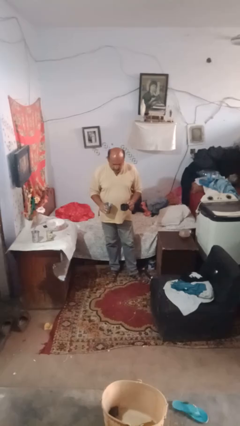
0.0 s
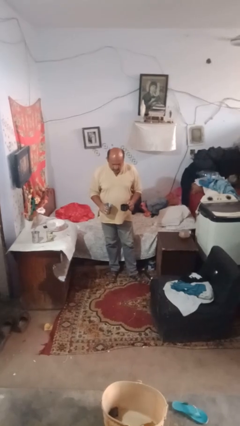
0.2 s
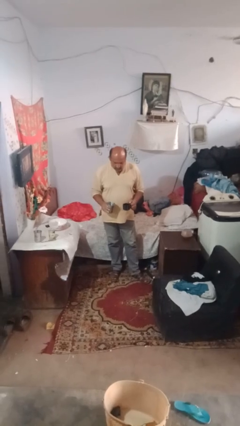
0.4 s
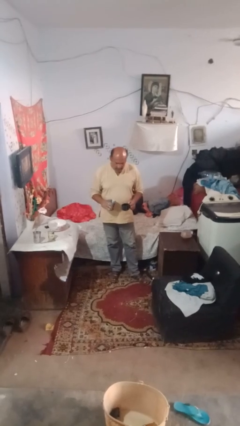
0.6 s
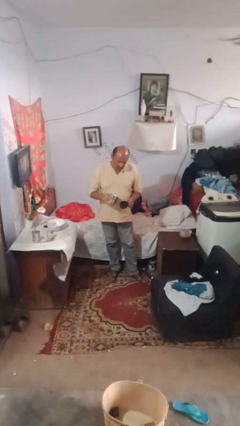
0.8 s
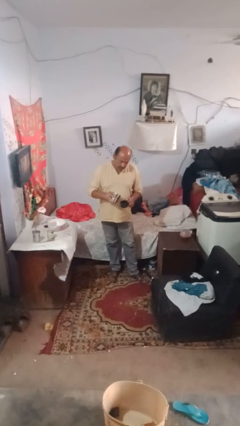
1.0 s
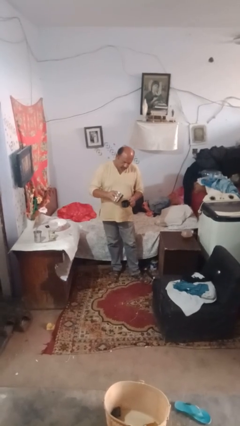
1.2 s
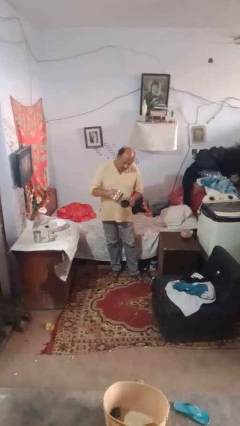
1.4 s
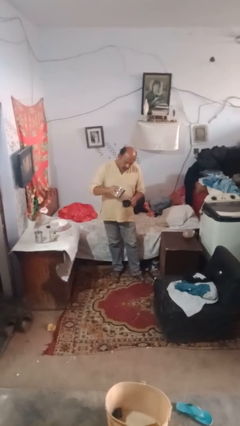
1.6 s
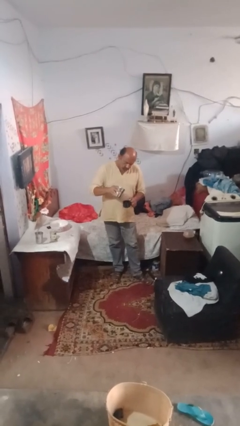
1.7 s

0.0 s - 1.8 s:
person pours liquid into cup

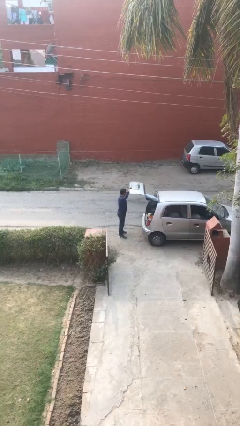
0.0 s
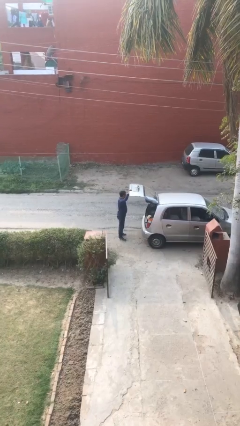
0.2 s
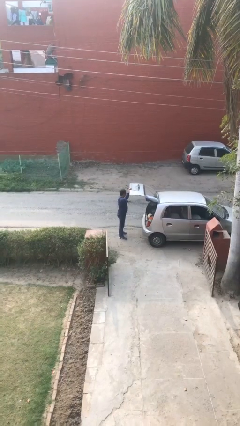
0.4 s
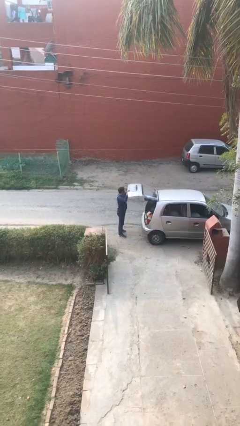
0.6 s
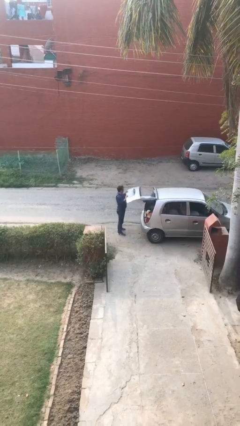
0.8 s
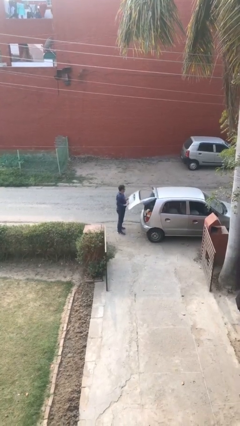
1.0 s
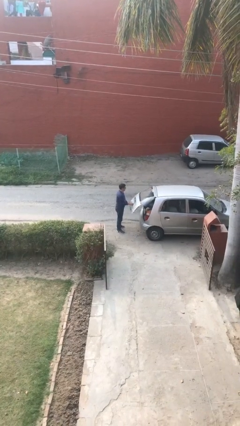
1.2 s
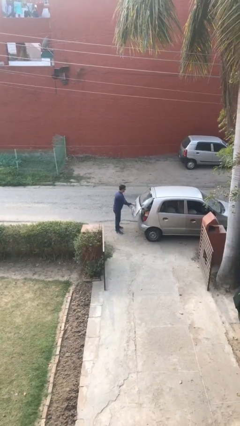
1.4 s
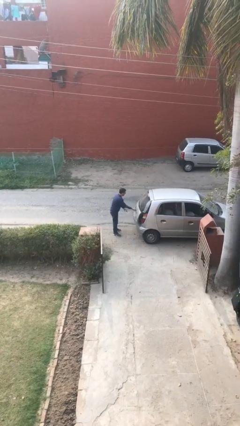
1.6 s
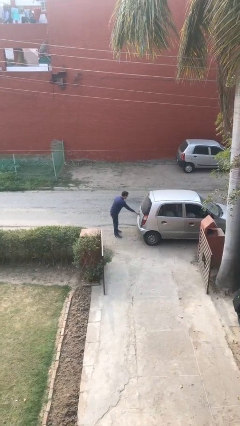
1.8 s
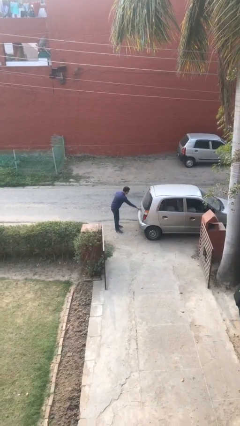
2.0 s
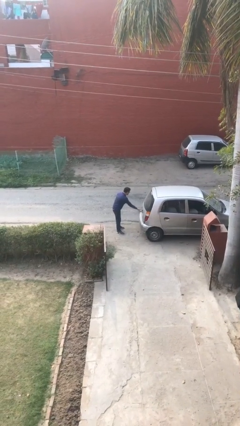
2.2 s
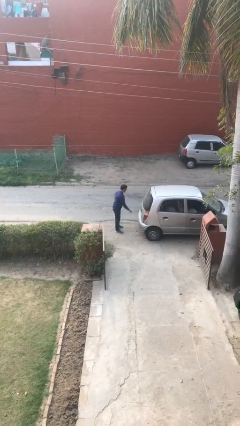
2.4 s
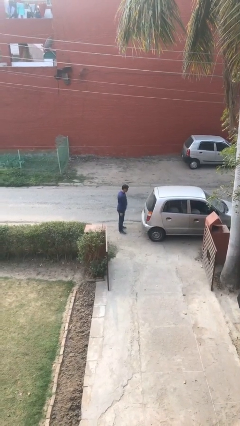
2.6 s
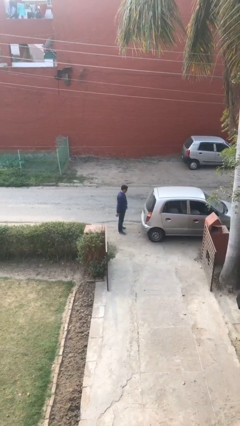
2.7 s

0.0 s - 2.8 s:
person closes car trunk

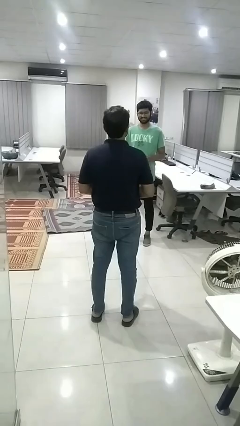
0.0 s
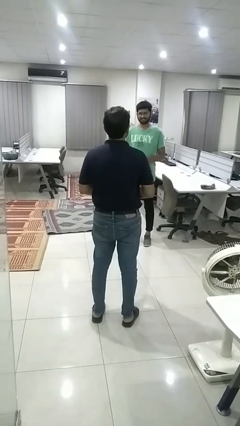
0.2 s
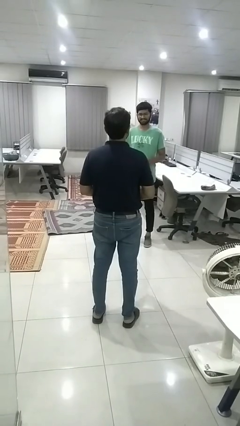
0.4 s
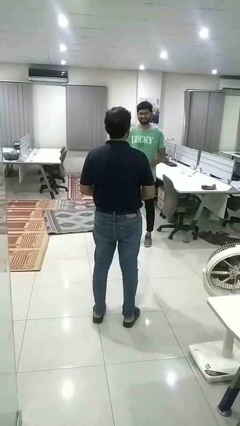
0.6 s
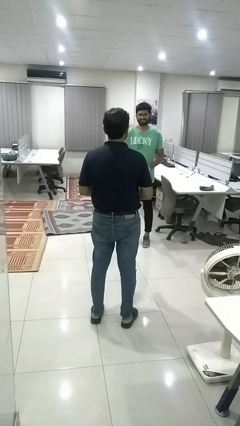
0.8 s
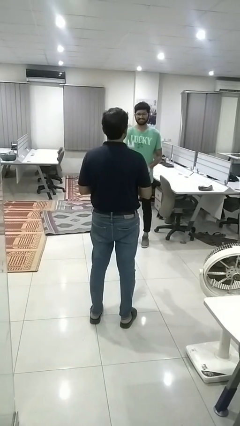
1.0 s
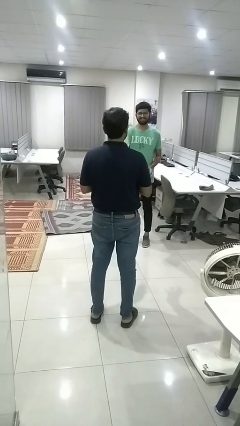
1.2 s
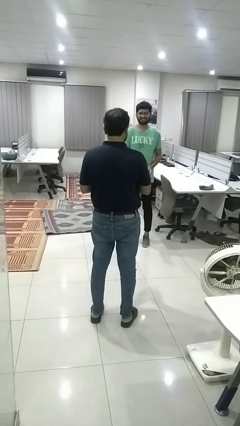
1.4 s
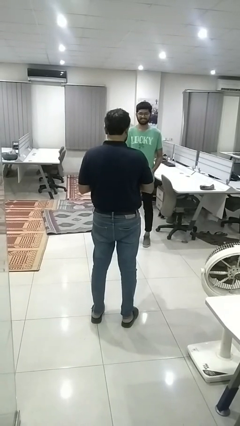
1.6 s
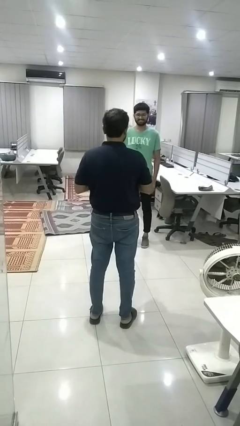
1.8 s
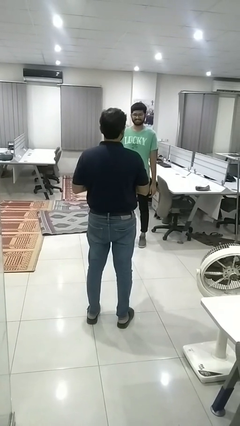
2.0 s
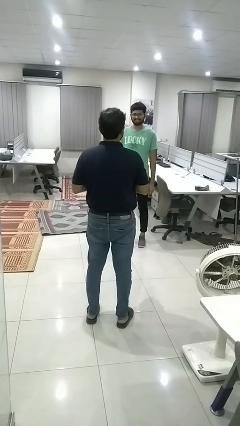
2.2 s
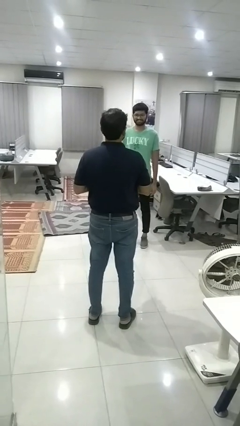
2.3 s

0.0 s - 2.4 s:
person catches object from person

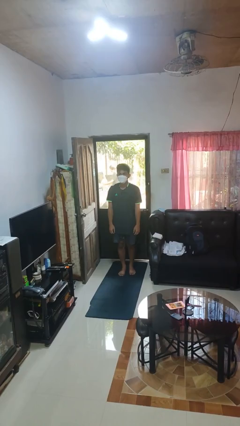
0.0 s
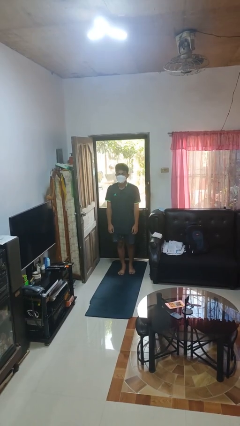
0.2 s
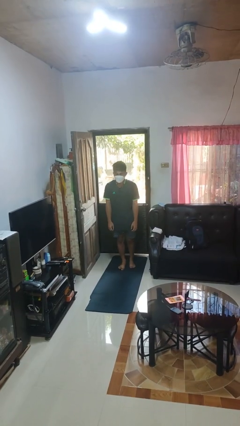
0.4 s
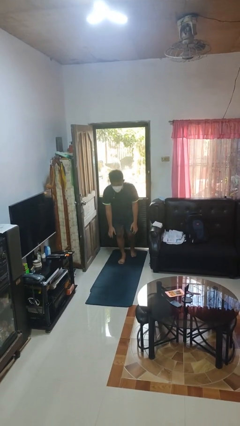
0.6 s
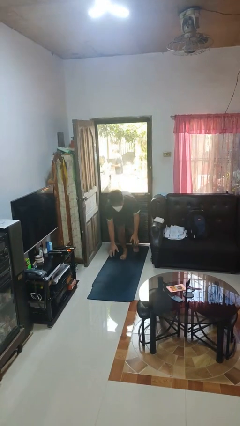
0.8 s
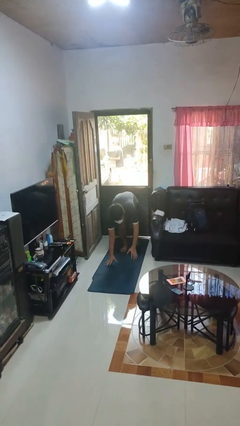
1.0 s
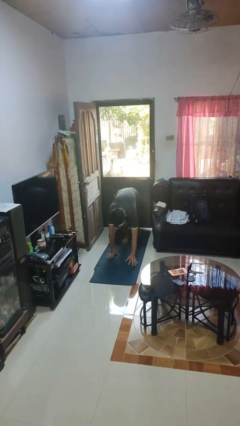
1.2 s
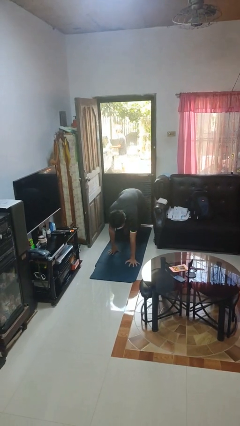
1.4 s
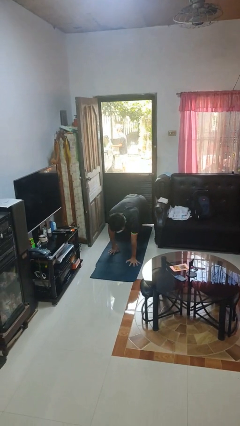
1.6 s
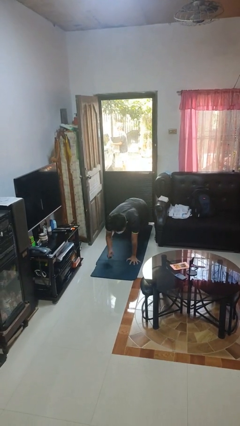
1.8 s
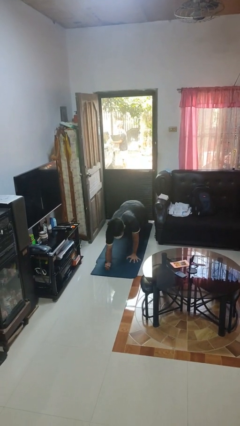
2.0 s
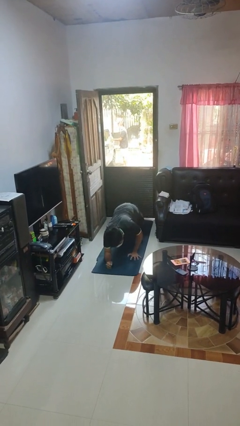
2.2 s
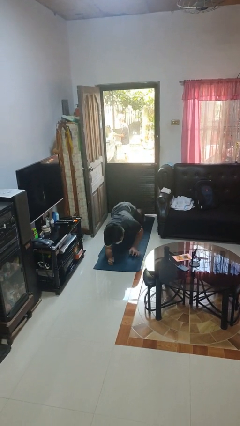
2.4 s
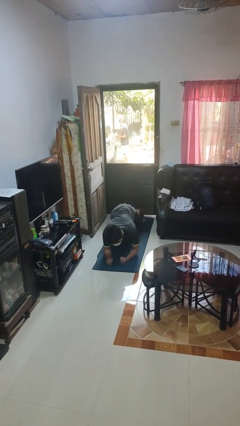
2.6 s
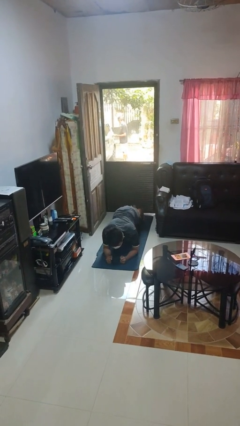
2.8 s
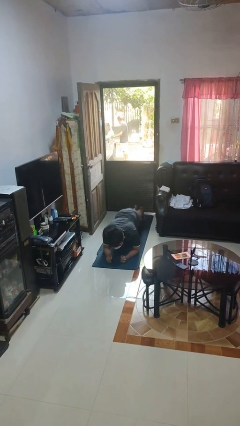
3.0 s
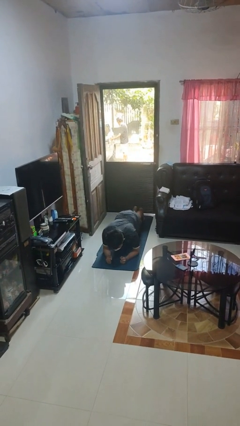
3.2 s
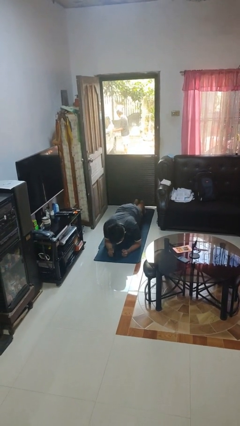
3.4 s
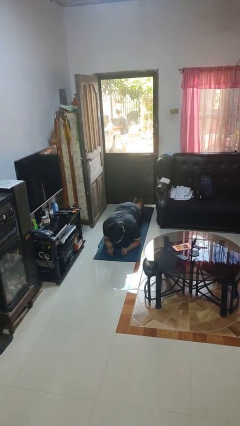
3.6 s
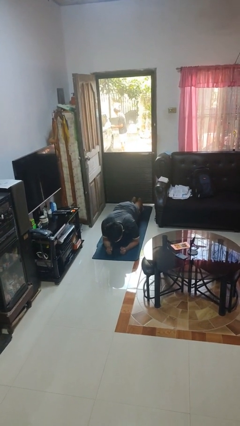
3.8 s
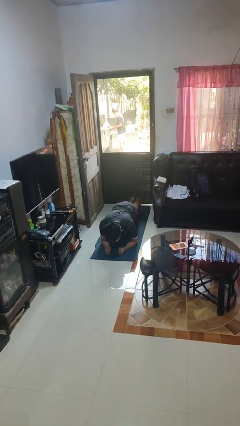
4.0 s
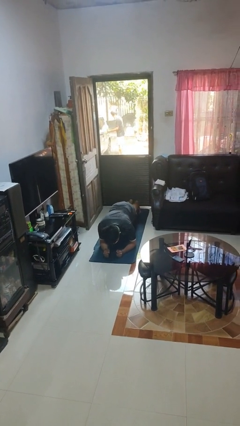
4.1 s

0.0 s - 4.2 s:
person exercises with plank

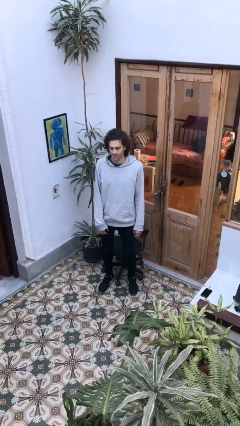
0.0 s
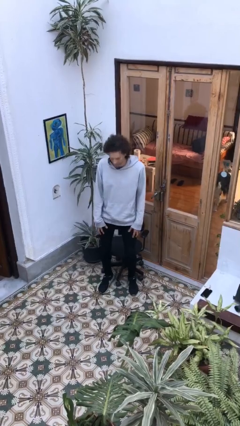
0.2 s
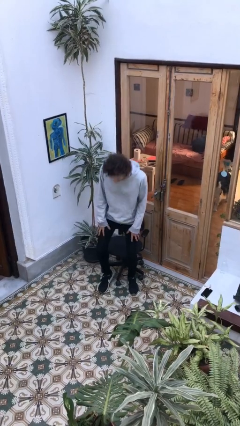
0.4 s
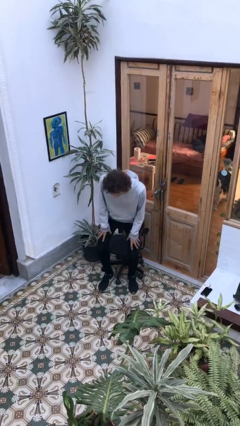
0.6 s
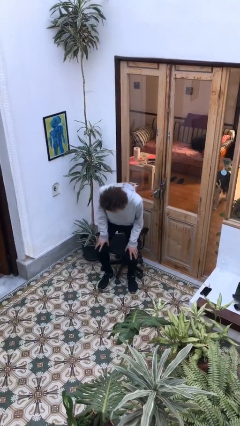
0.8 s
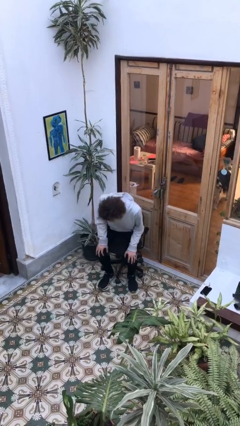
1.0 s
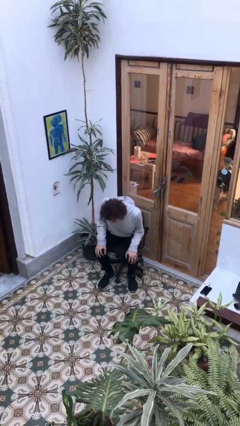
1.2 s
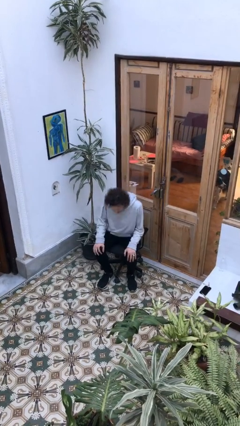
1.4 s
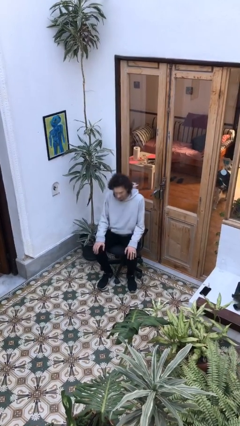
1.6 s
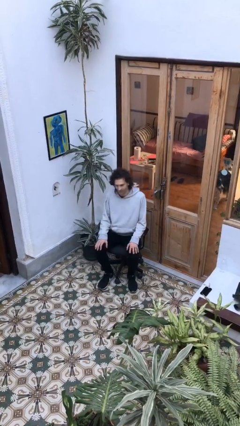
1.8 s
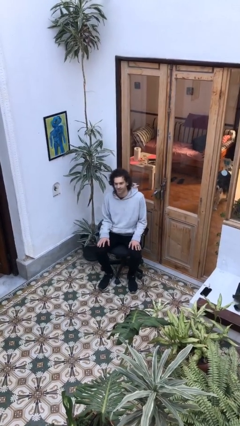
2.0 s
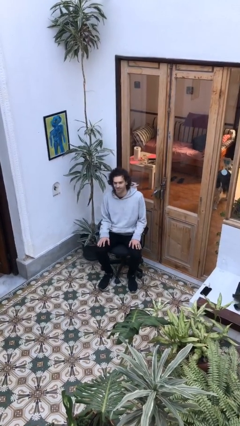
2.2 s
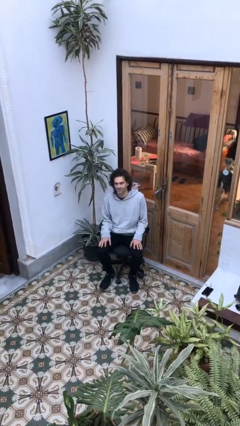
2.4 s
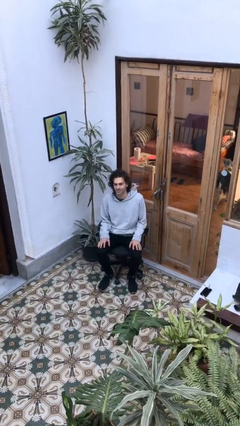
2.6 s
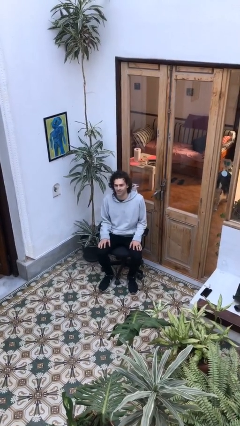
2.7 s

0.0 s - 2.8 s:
person sits down

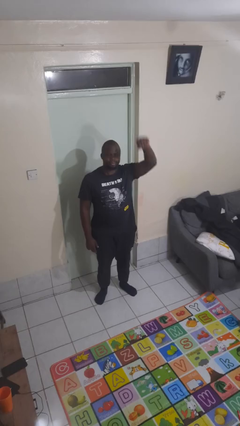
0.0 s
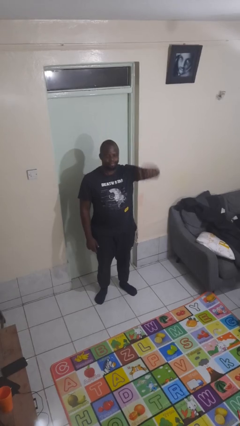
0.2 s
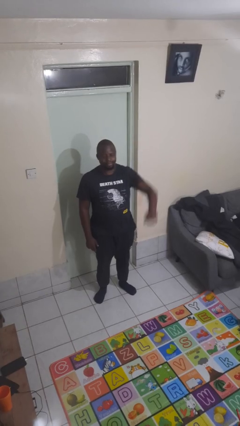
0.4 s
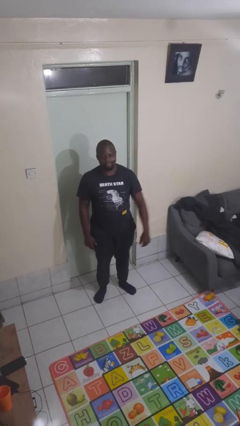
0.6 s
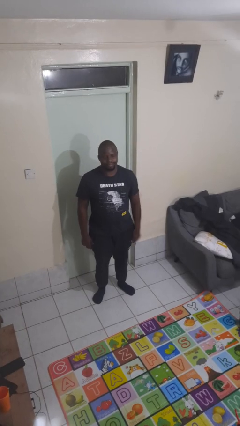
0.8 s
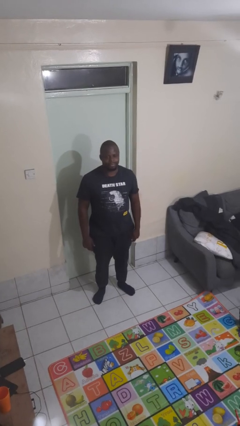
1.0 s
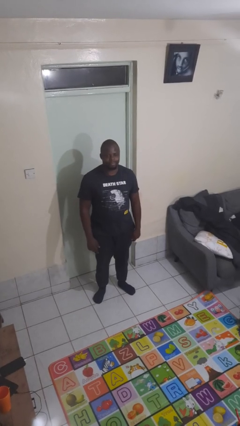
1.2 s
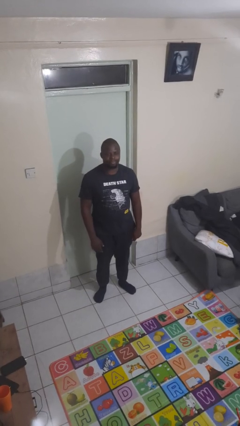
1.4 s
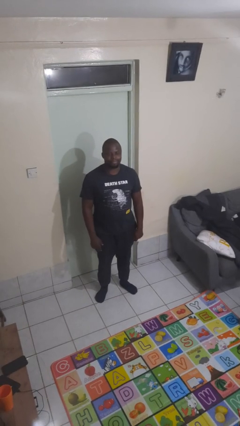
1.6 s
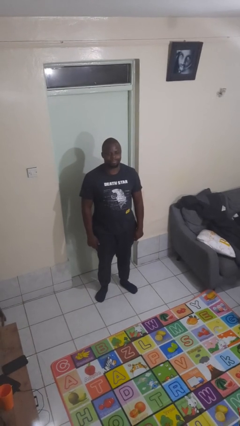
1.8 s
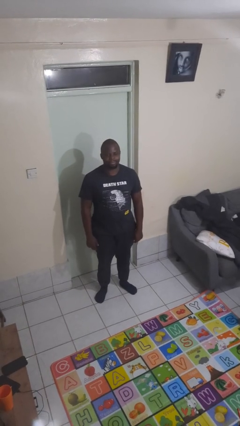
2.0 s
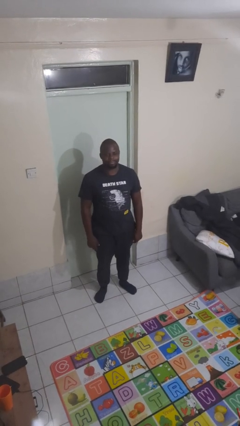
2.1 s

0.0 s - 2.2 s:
person gestures raise hand

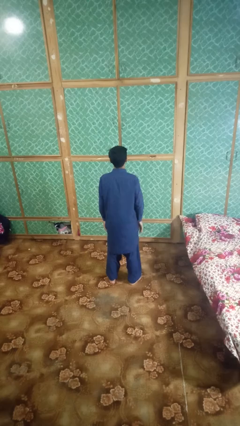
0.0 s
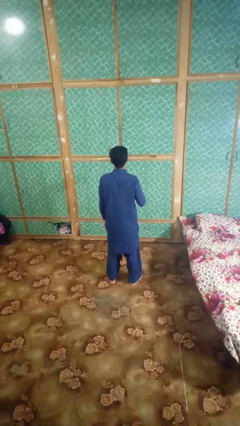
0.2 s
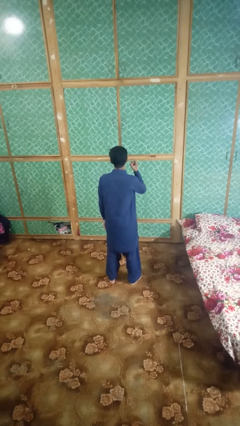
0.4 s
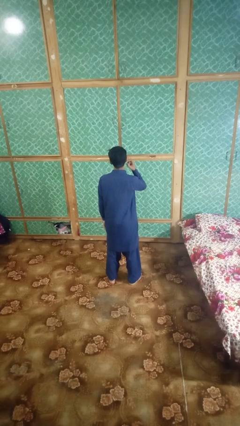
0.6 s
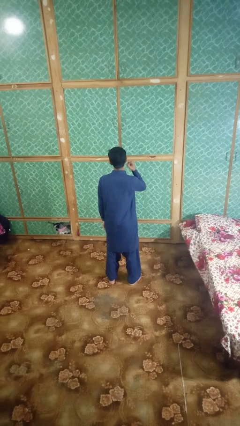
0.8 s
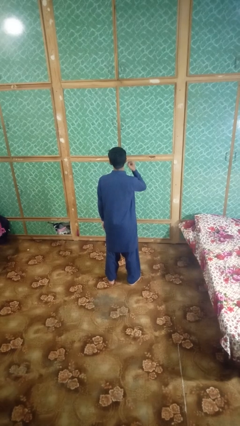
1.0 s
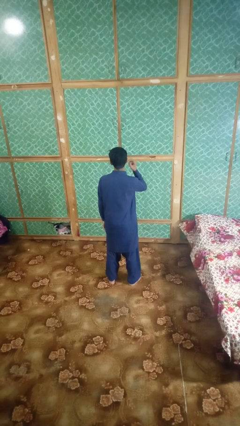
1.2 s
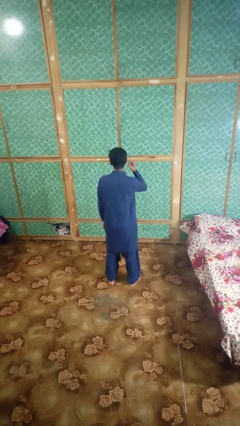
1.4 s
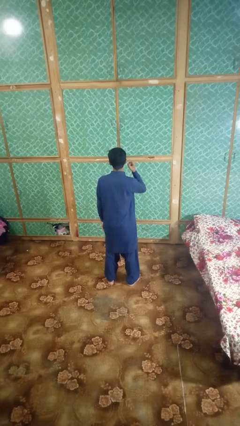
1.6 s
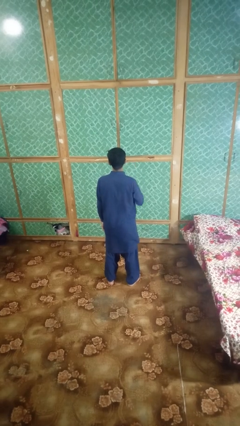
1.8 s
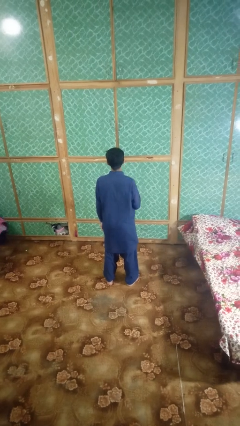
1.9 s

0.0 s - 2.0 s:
person gestures listen closely
